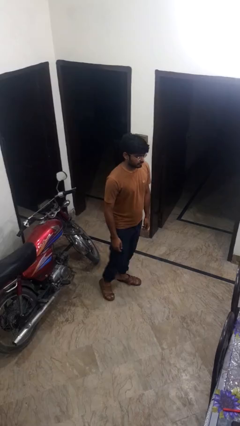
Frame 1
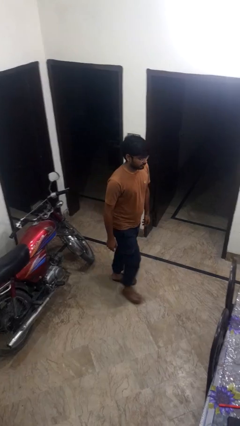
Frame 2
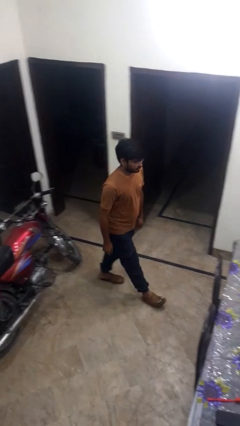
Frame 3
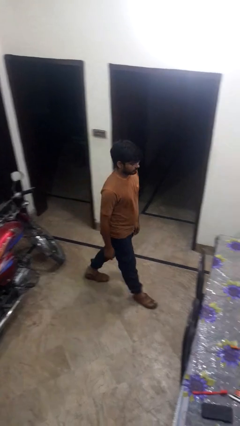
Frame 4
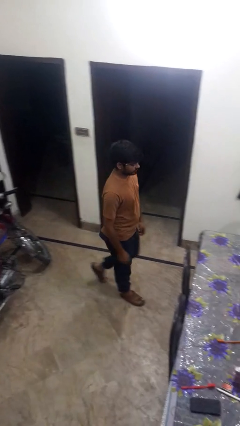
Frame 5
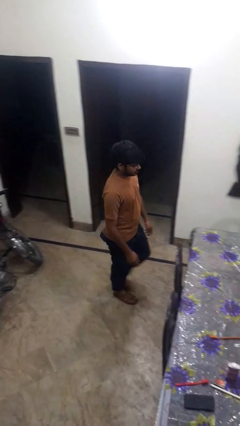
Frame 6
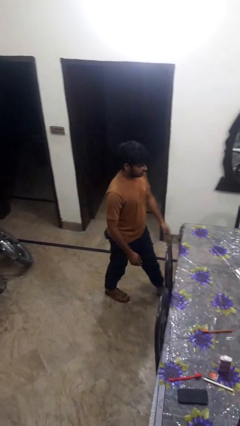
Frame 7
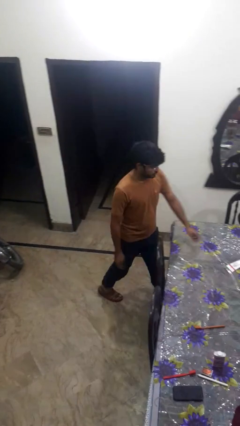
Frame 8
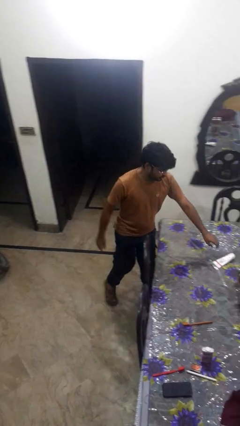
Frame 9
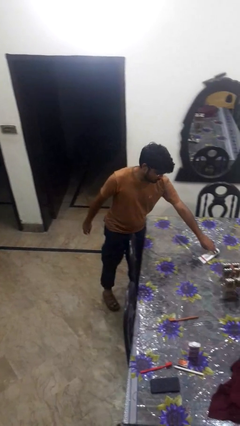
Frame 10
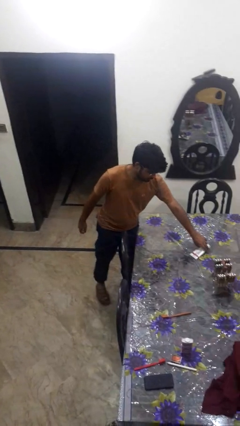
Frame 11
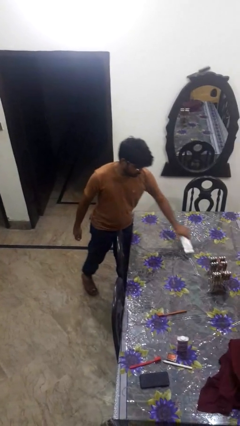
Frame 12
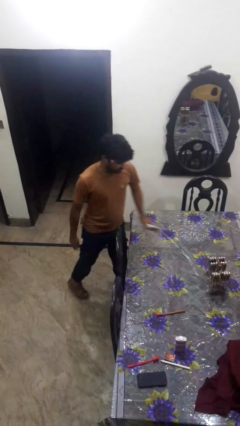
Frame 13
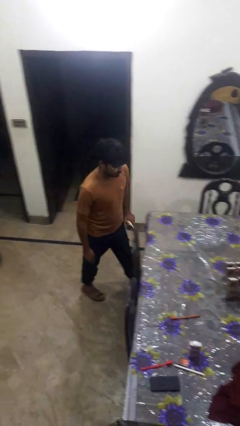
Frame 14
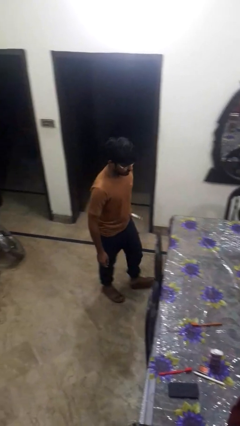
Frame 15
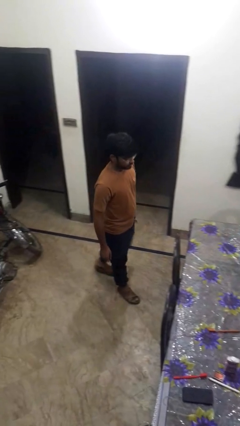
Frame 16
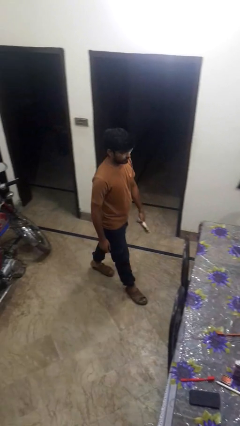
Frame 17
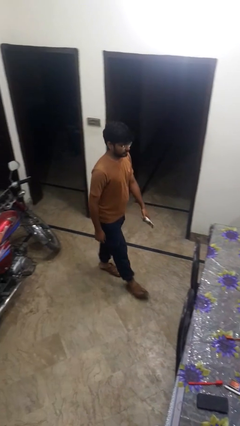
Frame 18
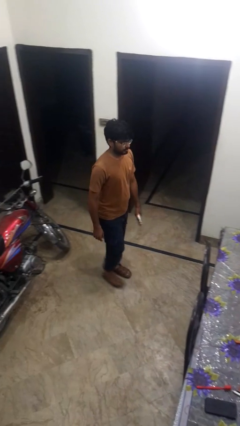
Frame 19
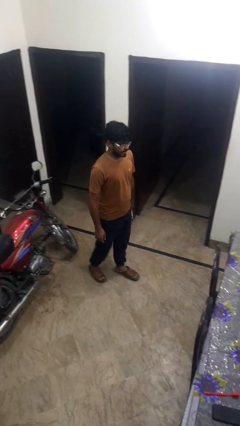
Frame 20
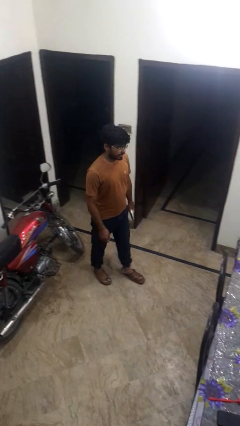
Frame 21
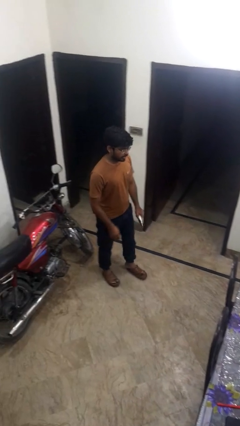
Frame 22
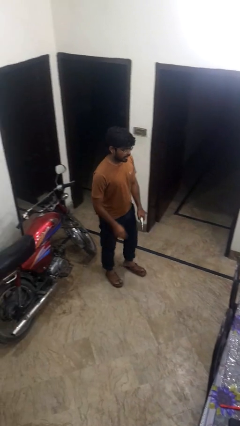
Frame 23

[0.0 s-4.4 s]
person picks up object from table

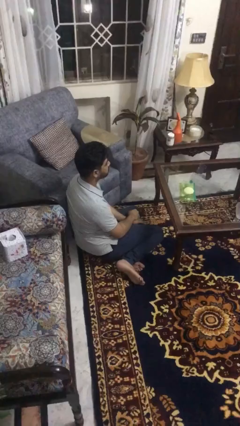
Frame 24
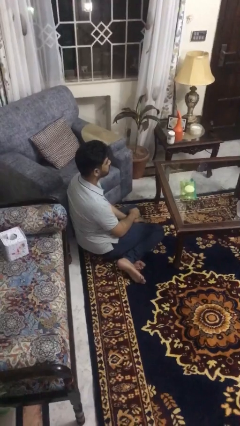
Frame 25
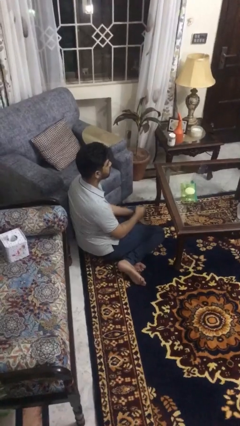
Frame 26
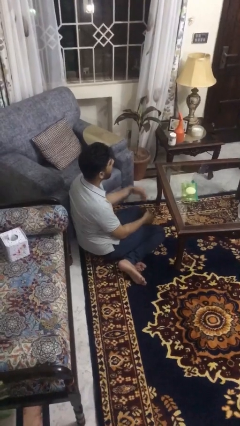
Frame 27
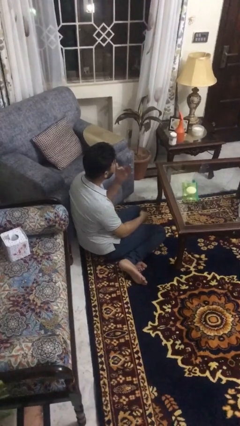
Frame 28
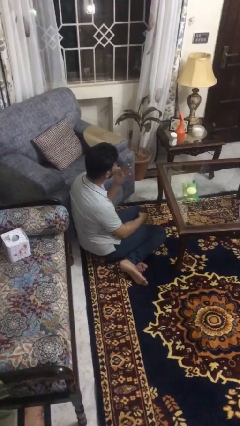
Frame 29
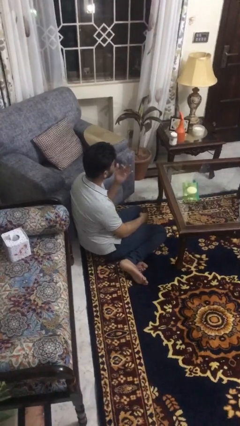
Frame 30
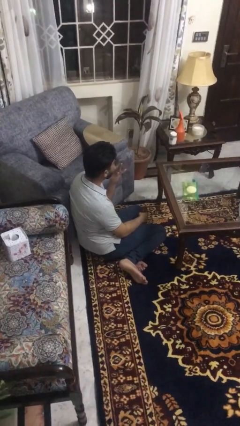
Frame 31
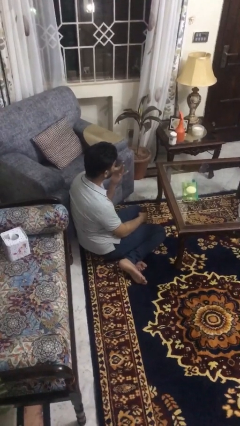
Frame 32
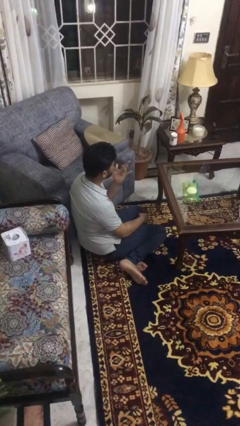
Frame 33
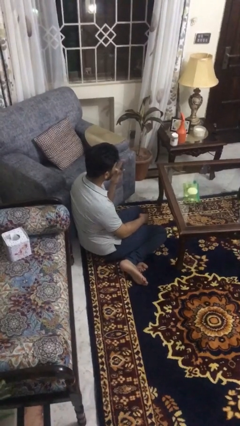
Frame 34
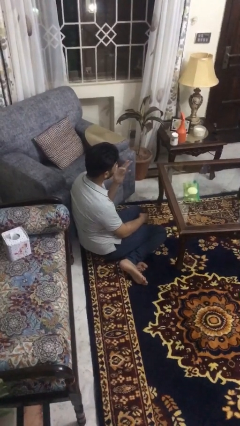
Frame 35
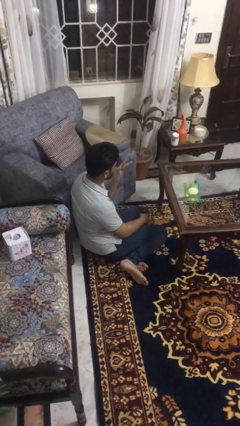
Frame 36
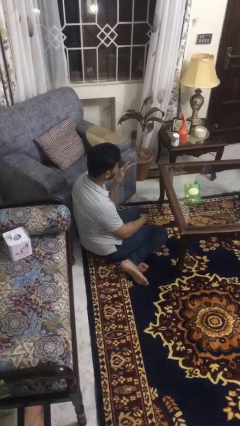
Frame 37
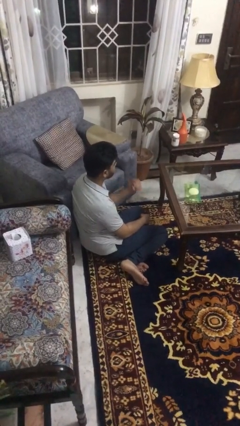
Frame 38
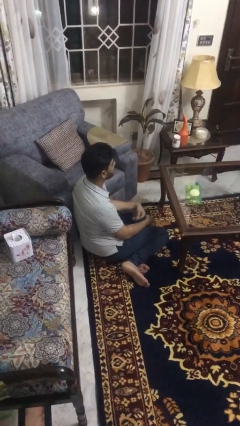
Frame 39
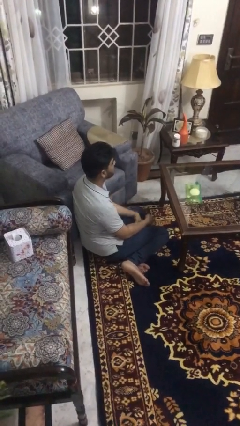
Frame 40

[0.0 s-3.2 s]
person licks fingers

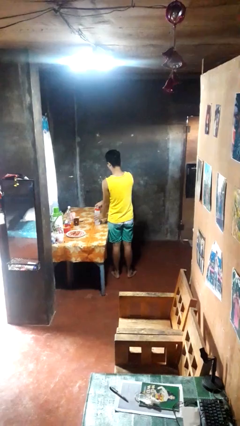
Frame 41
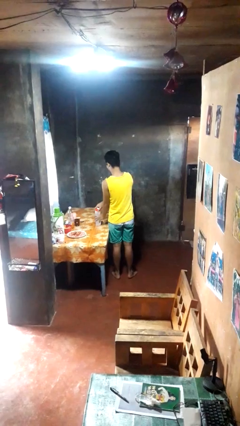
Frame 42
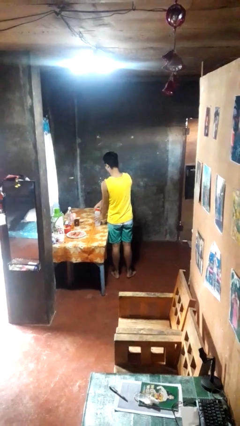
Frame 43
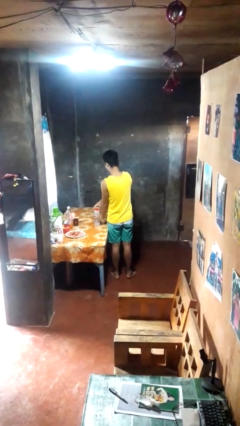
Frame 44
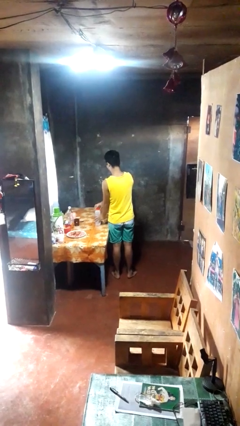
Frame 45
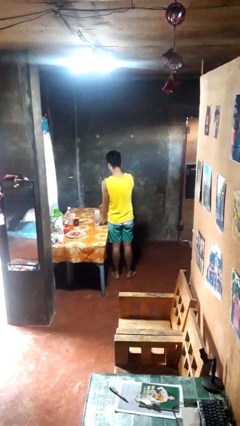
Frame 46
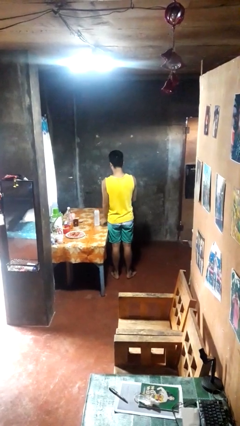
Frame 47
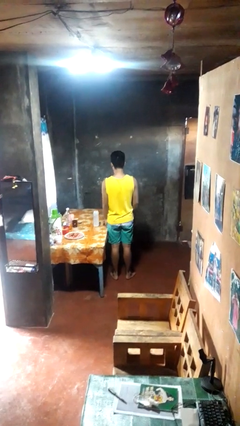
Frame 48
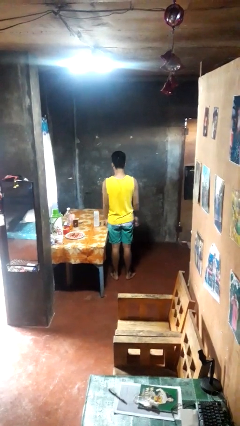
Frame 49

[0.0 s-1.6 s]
person opens jar

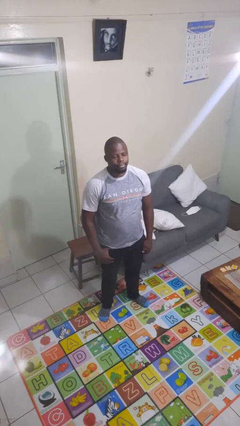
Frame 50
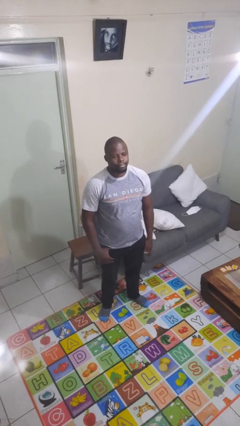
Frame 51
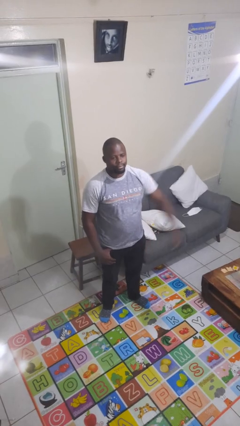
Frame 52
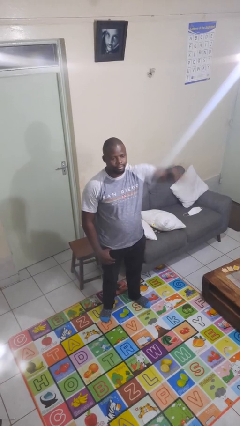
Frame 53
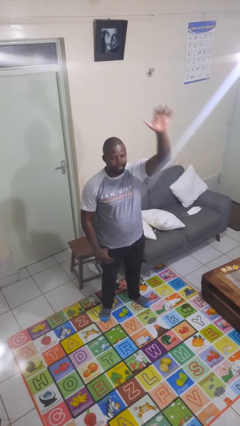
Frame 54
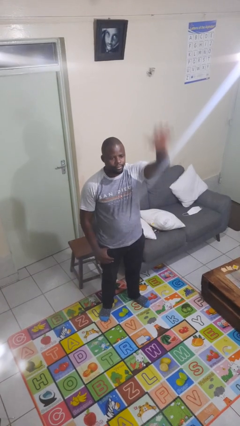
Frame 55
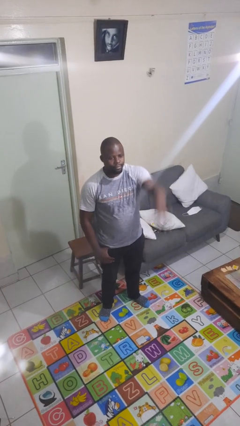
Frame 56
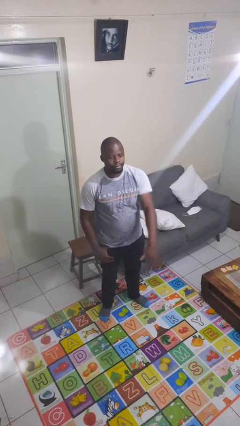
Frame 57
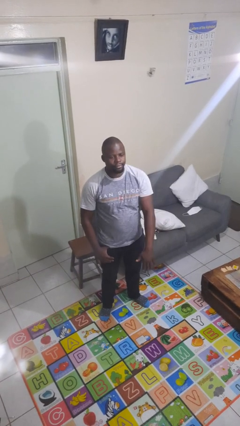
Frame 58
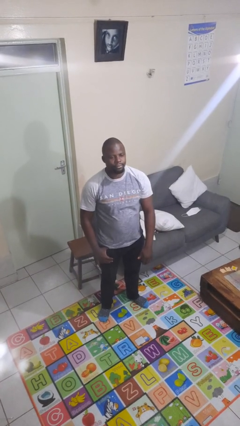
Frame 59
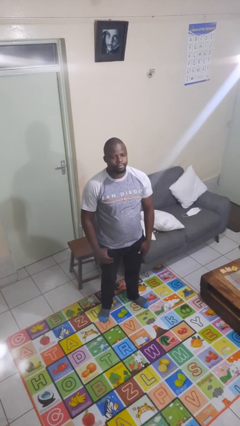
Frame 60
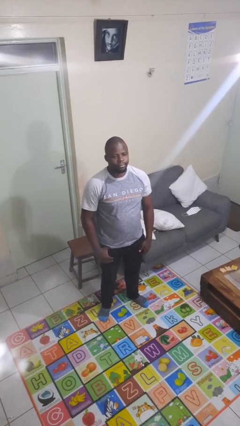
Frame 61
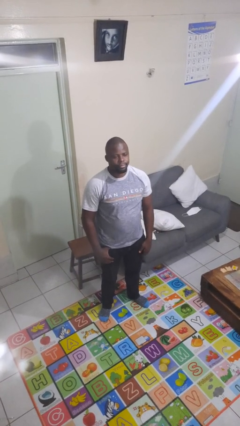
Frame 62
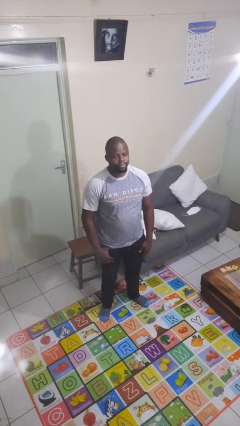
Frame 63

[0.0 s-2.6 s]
person gestures swipe down

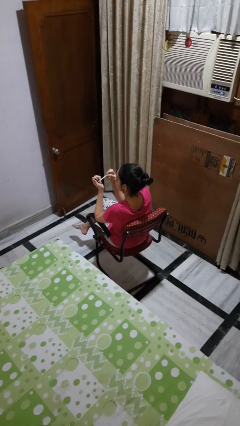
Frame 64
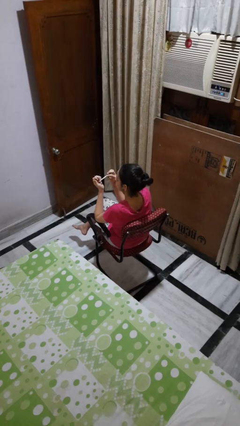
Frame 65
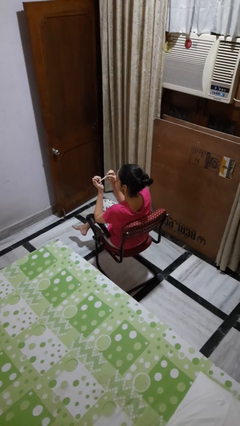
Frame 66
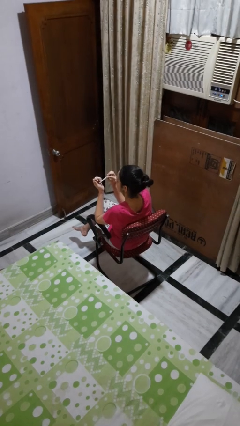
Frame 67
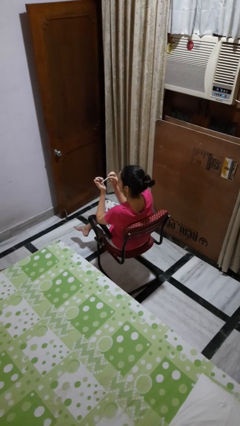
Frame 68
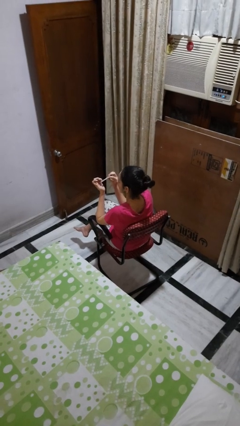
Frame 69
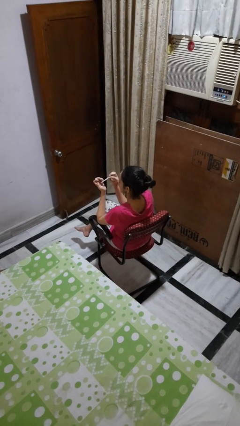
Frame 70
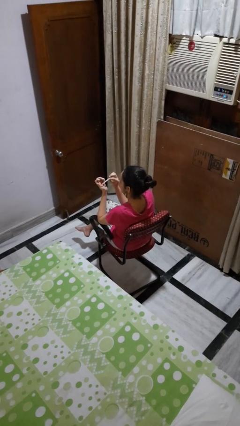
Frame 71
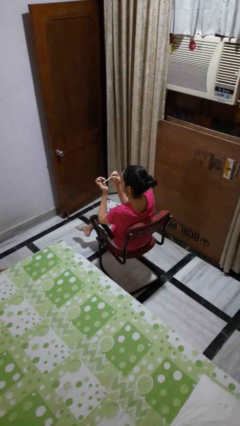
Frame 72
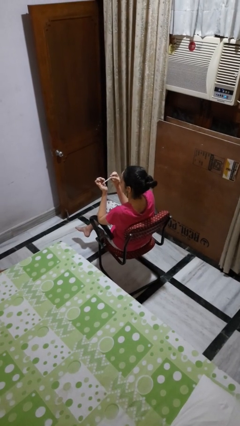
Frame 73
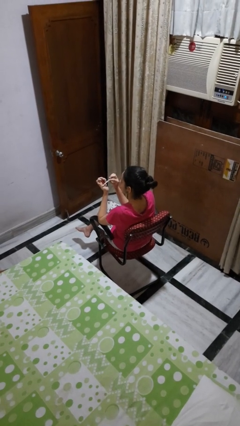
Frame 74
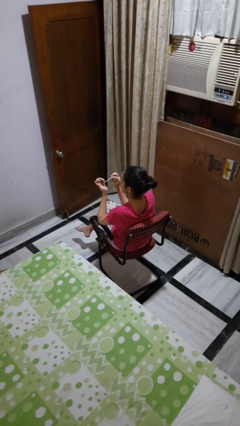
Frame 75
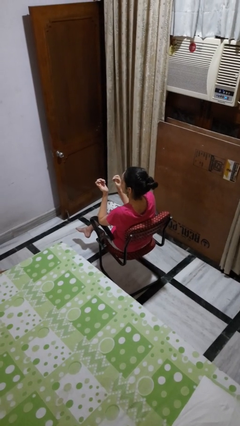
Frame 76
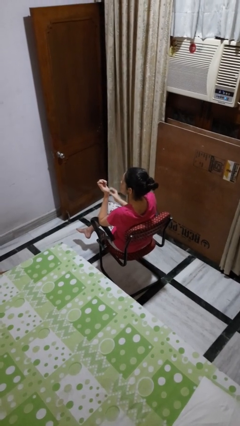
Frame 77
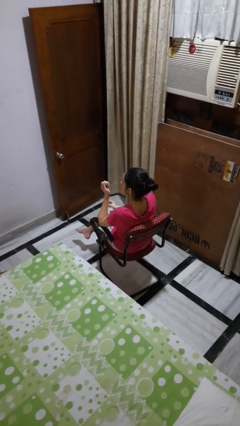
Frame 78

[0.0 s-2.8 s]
person files fingernails

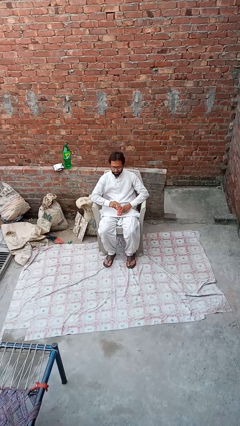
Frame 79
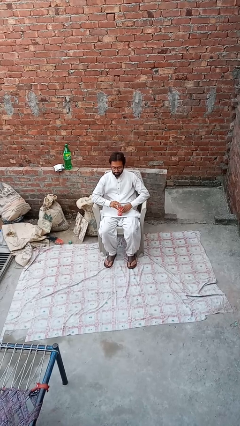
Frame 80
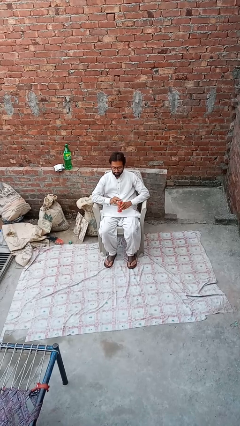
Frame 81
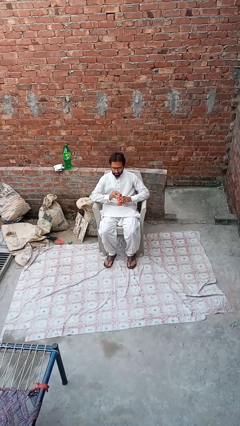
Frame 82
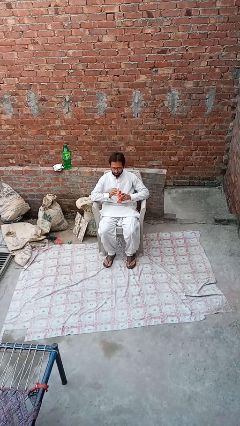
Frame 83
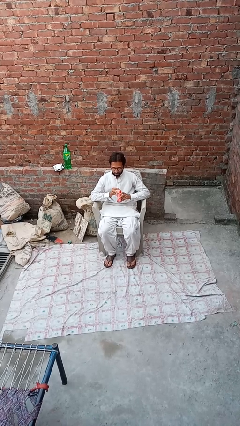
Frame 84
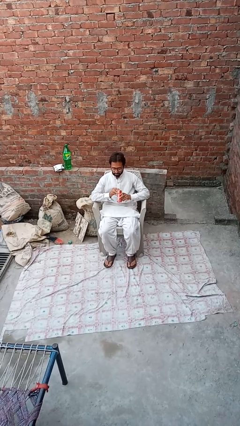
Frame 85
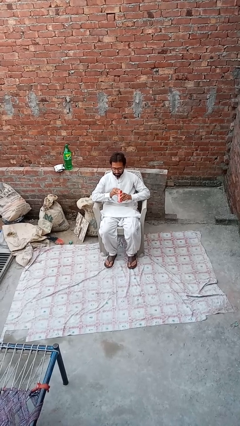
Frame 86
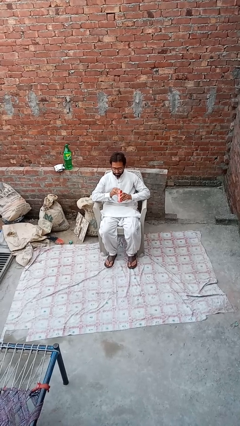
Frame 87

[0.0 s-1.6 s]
person drinks from straw

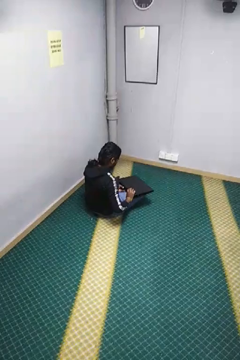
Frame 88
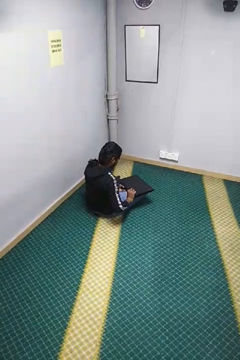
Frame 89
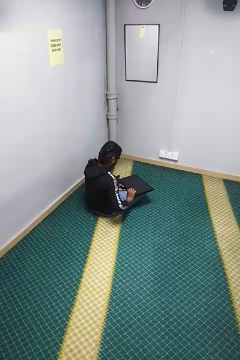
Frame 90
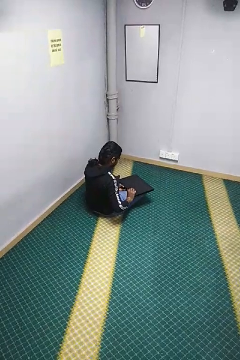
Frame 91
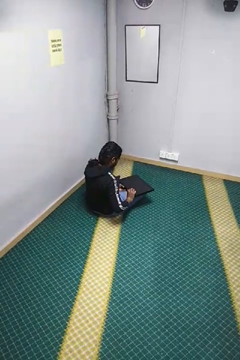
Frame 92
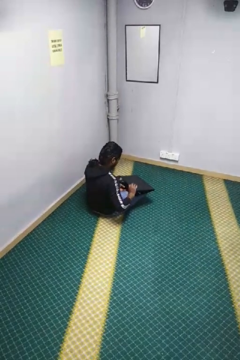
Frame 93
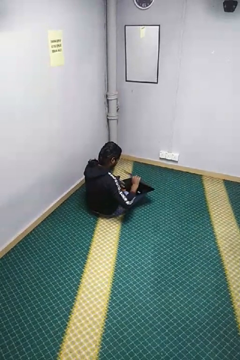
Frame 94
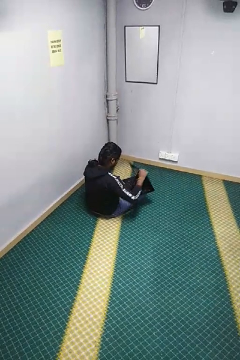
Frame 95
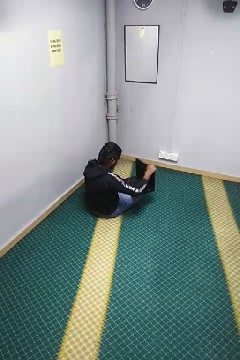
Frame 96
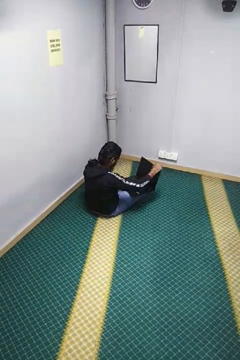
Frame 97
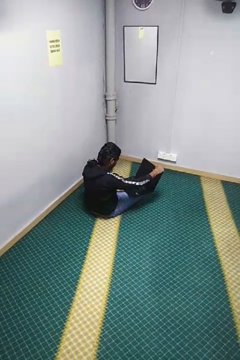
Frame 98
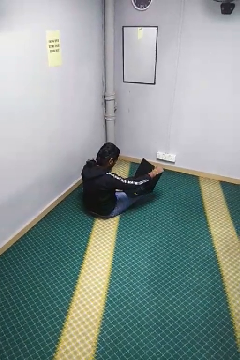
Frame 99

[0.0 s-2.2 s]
person opens laptop
